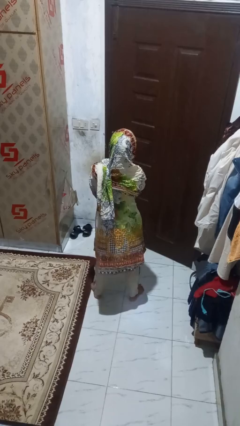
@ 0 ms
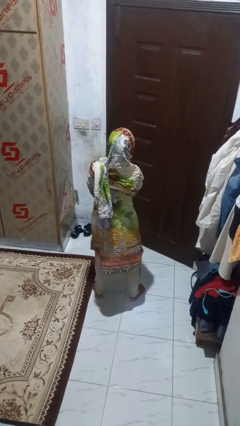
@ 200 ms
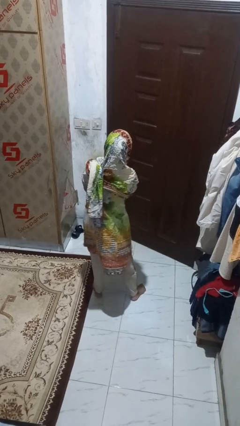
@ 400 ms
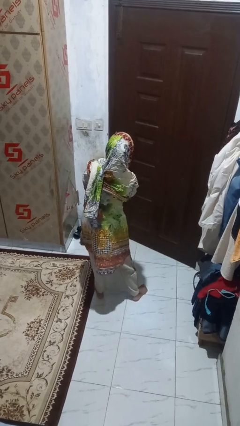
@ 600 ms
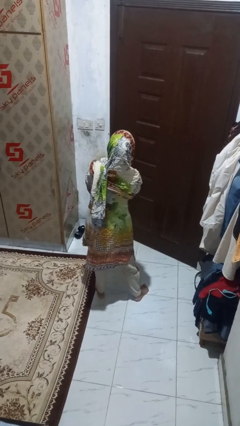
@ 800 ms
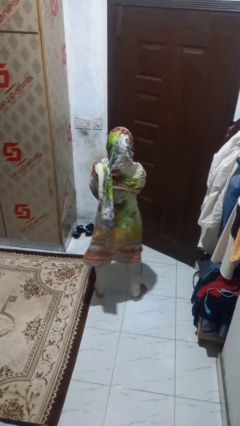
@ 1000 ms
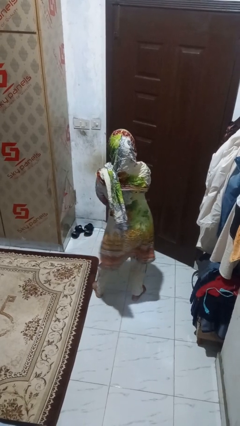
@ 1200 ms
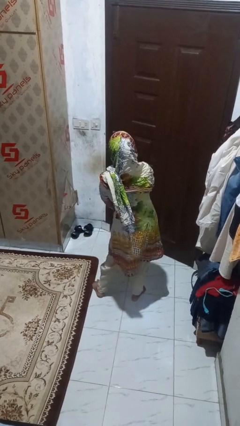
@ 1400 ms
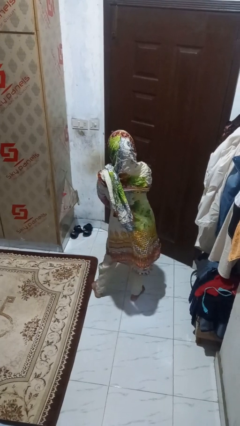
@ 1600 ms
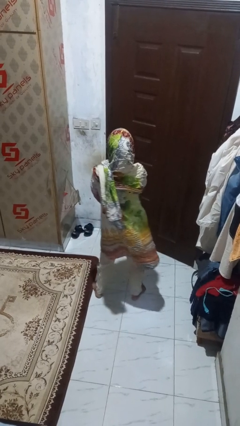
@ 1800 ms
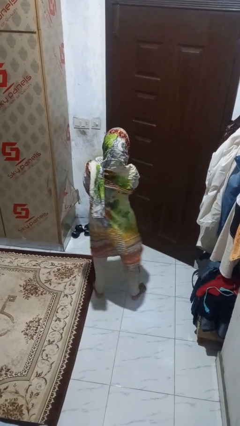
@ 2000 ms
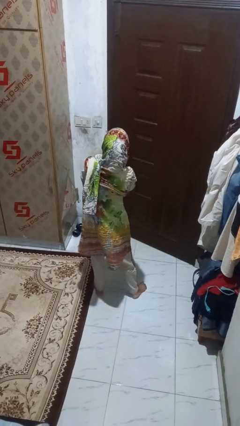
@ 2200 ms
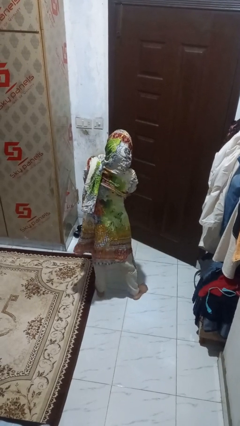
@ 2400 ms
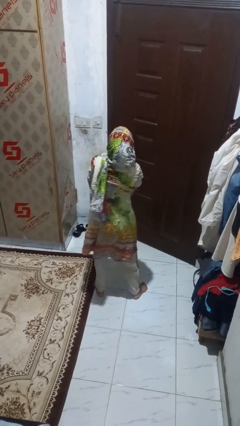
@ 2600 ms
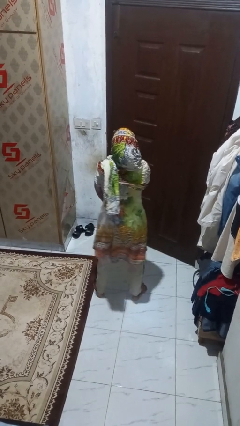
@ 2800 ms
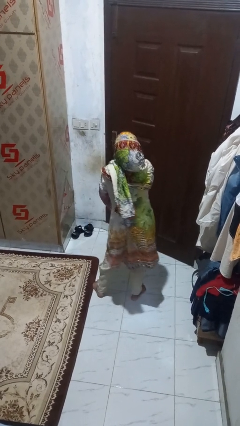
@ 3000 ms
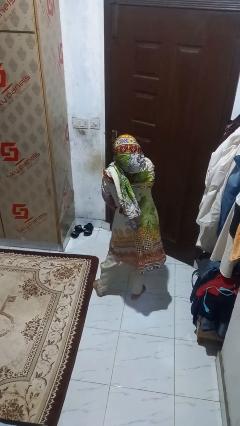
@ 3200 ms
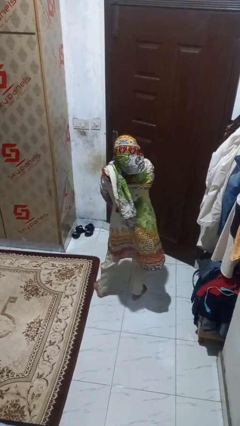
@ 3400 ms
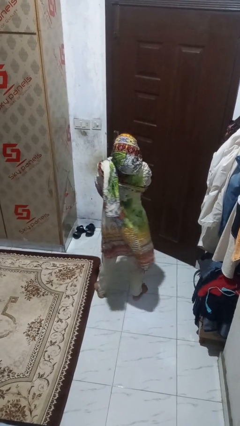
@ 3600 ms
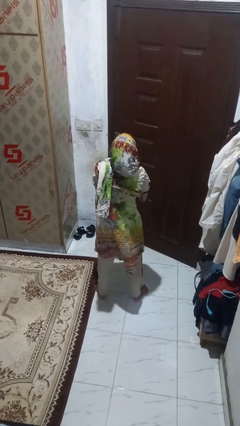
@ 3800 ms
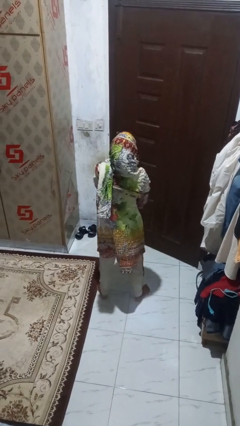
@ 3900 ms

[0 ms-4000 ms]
person wiggles hips

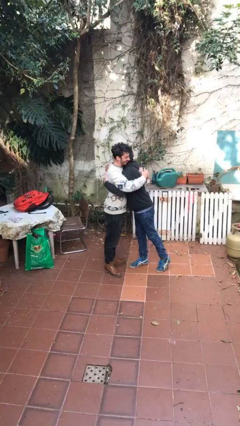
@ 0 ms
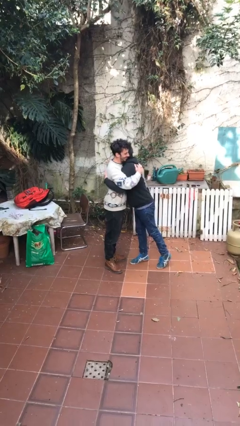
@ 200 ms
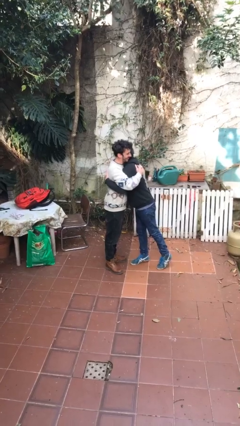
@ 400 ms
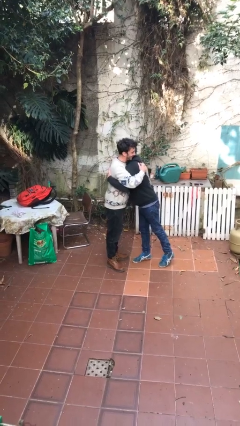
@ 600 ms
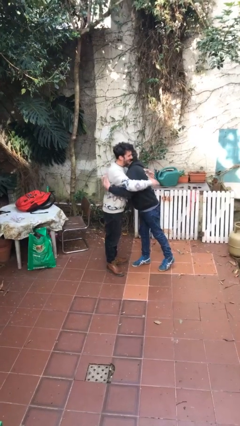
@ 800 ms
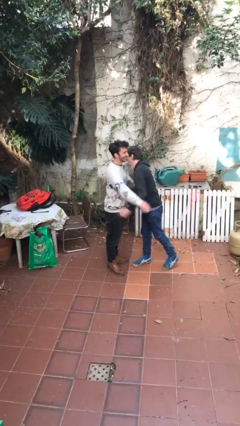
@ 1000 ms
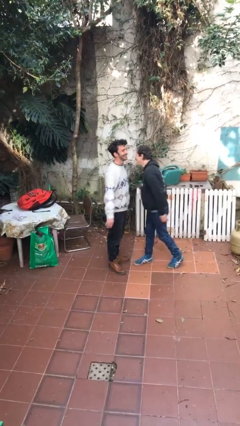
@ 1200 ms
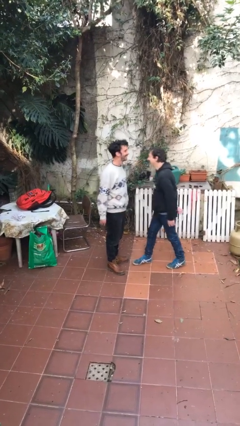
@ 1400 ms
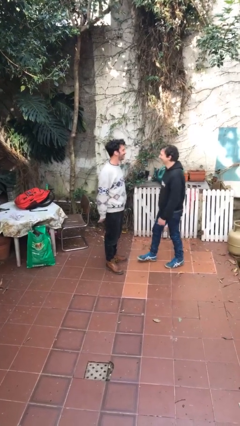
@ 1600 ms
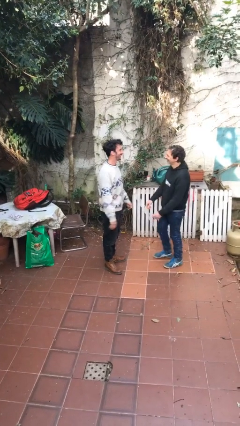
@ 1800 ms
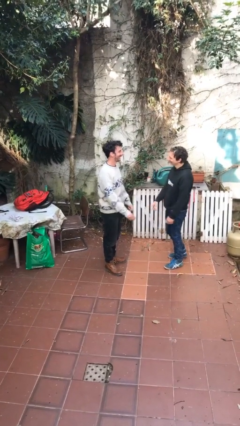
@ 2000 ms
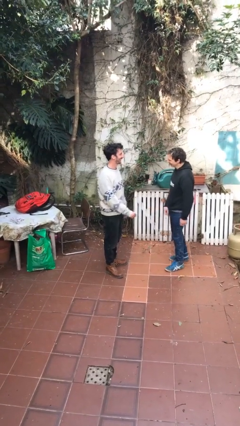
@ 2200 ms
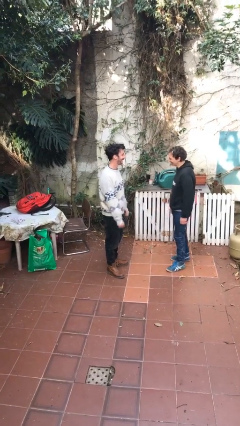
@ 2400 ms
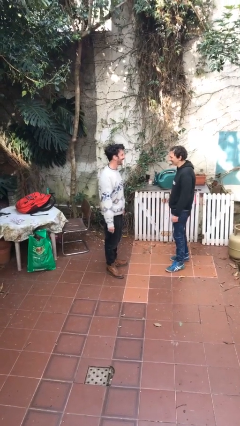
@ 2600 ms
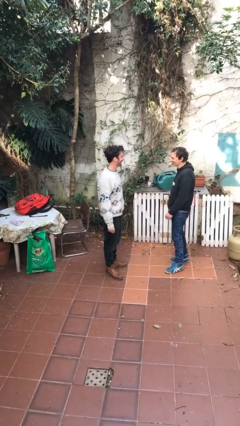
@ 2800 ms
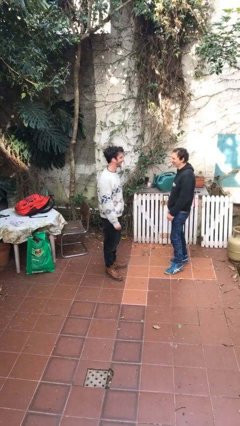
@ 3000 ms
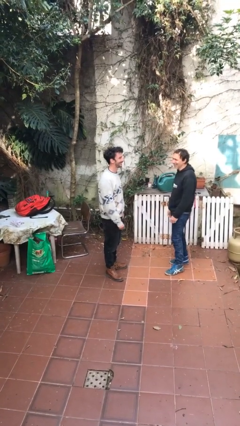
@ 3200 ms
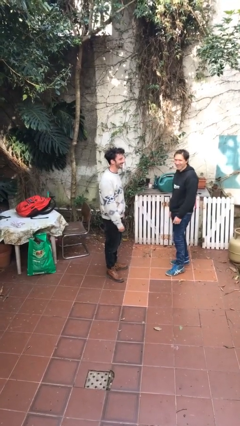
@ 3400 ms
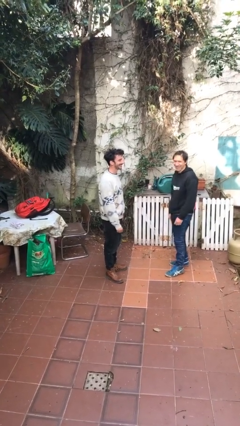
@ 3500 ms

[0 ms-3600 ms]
person talks to person

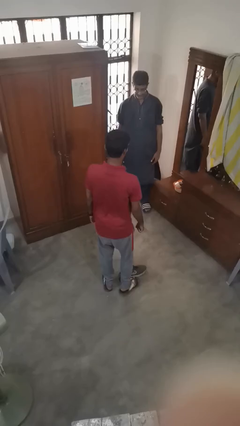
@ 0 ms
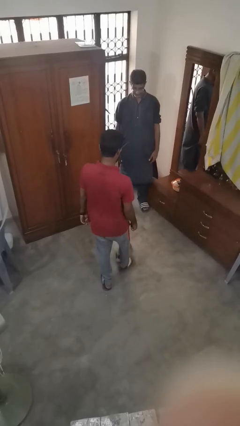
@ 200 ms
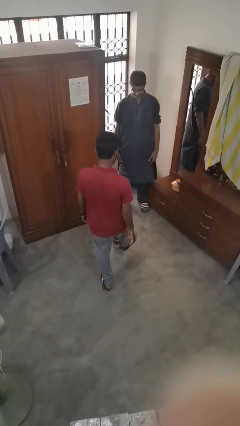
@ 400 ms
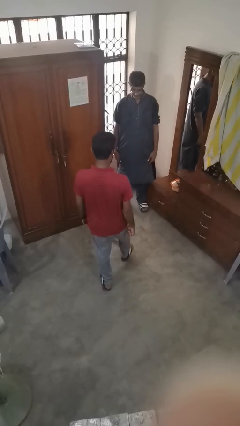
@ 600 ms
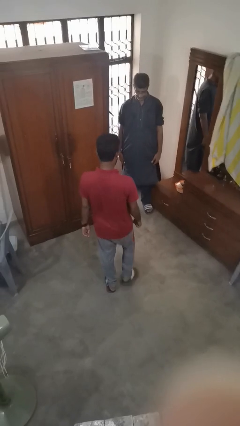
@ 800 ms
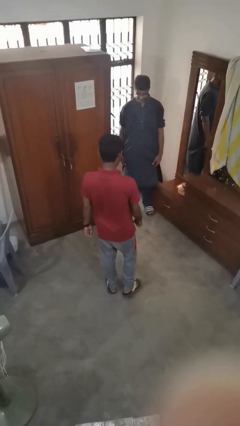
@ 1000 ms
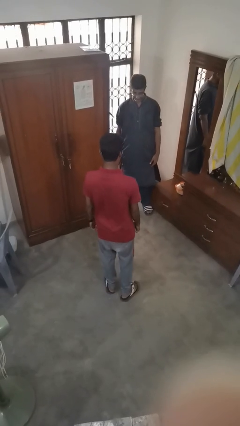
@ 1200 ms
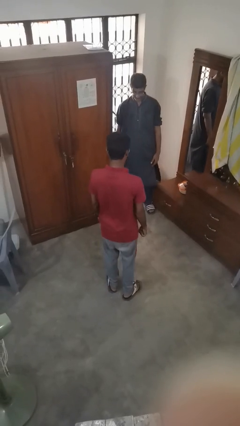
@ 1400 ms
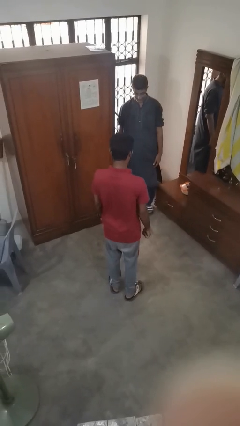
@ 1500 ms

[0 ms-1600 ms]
person kicks object to person

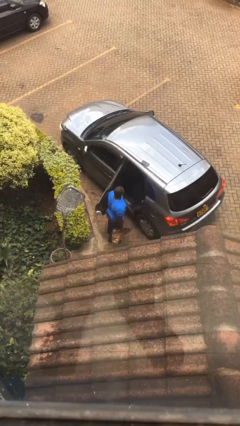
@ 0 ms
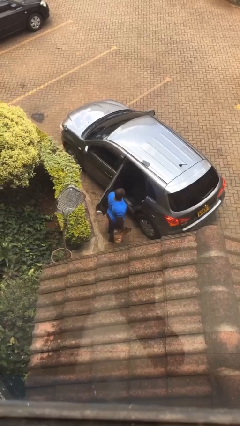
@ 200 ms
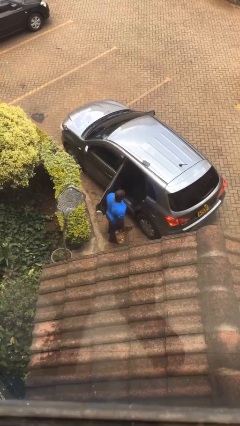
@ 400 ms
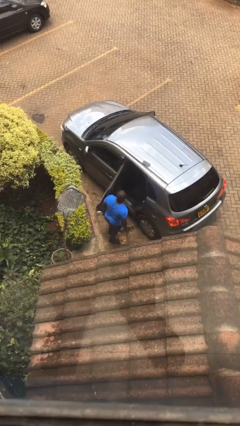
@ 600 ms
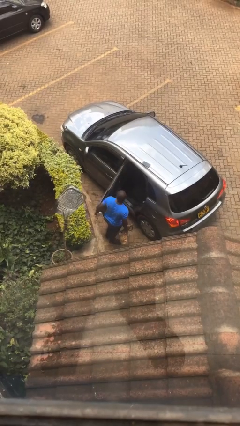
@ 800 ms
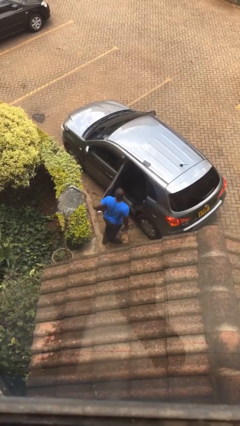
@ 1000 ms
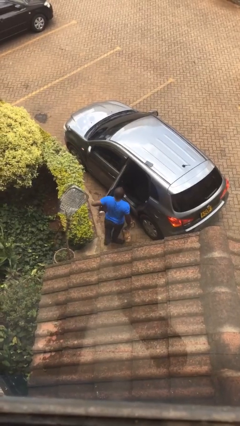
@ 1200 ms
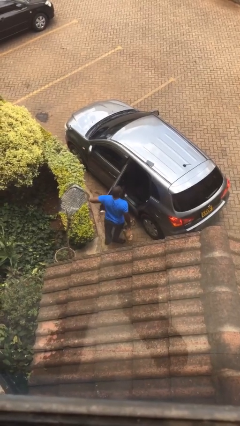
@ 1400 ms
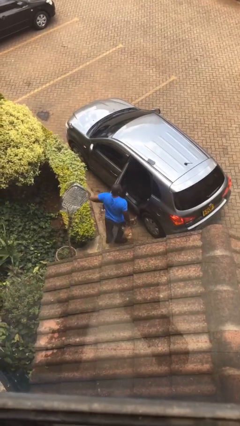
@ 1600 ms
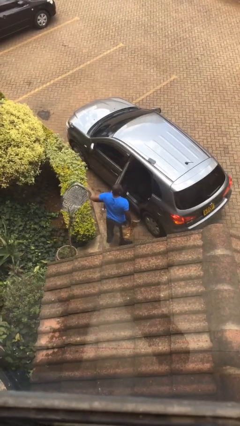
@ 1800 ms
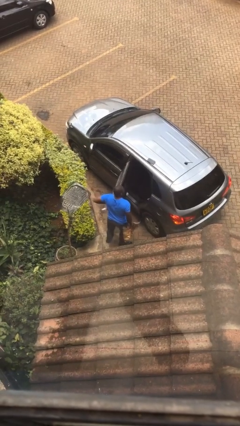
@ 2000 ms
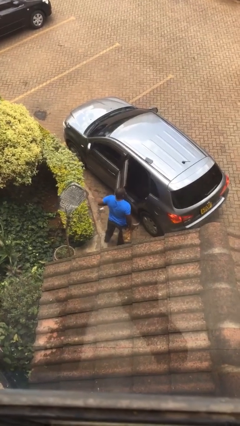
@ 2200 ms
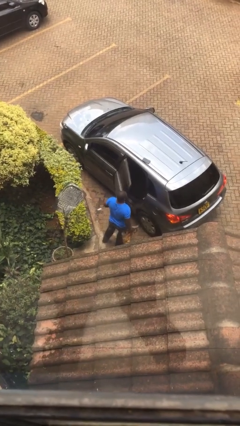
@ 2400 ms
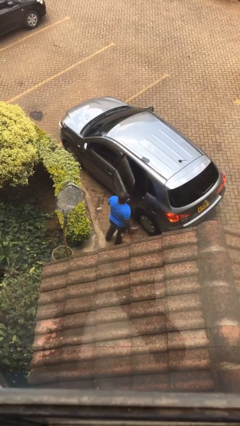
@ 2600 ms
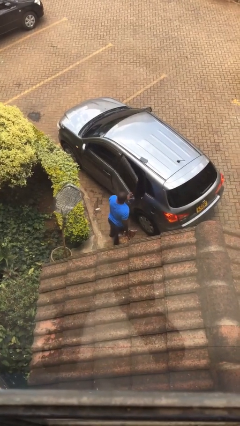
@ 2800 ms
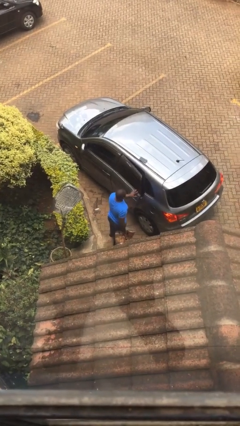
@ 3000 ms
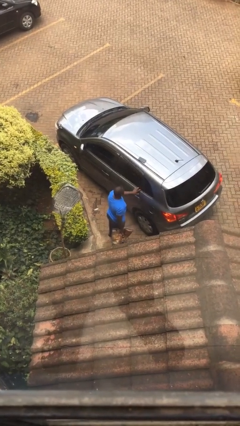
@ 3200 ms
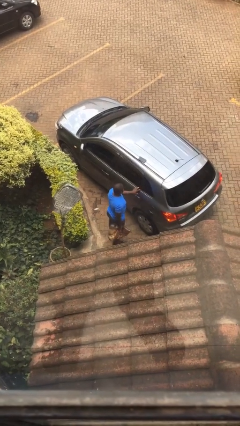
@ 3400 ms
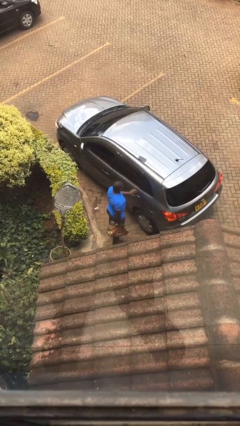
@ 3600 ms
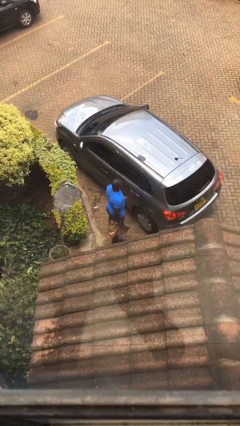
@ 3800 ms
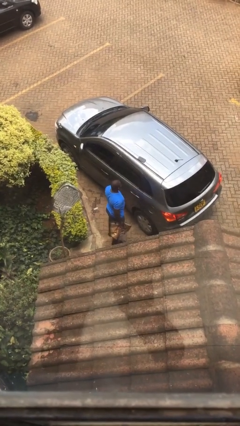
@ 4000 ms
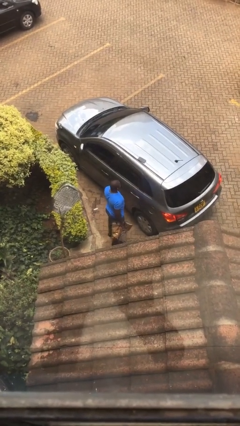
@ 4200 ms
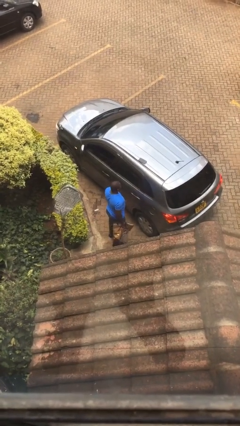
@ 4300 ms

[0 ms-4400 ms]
person closes car door

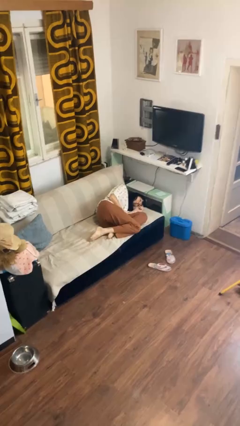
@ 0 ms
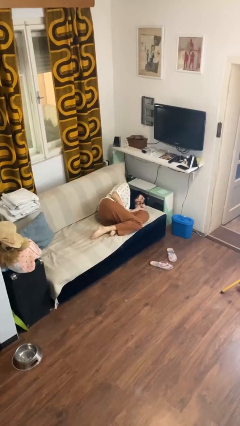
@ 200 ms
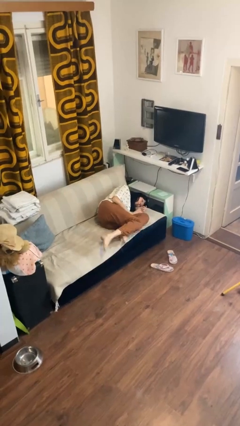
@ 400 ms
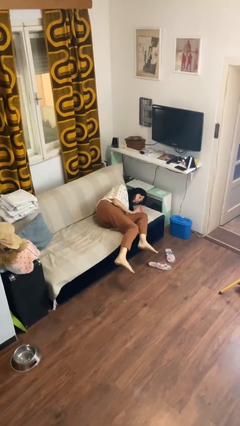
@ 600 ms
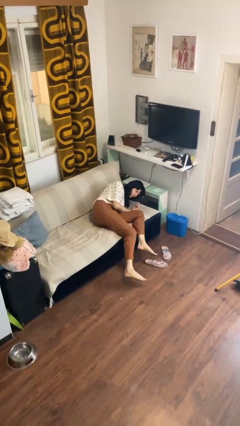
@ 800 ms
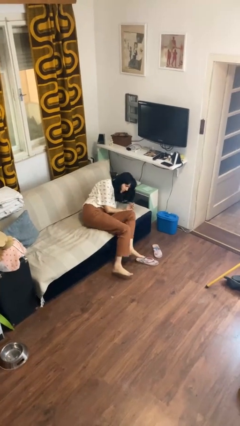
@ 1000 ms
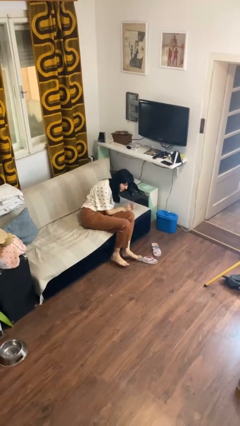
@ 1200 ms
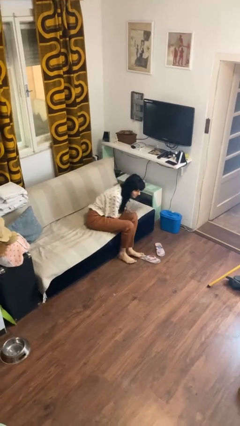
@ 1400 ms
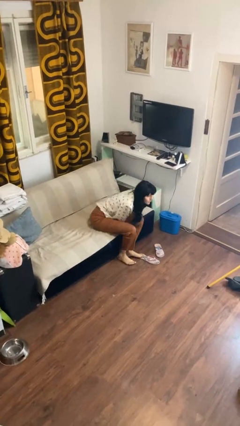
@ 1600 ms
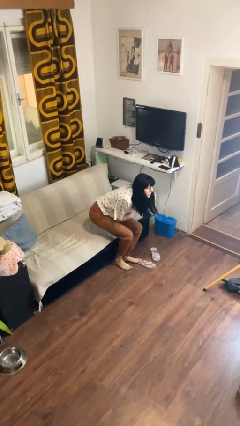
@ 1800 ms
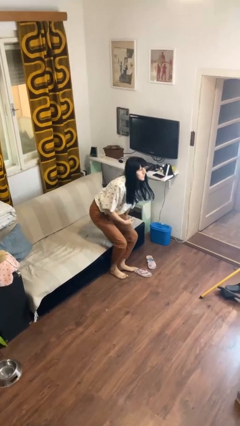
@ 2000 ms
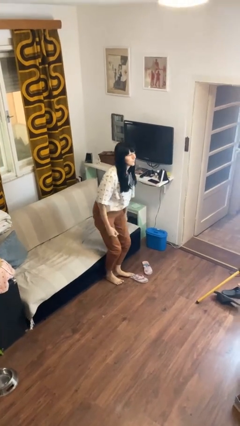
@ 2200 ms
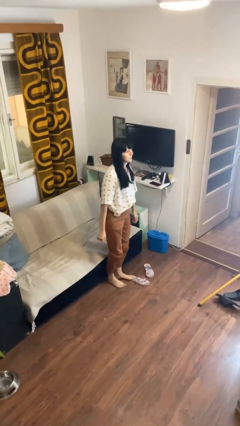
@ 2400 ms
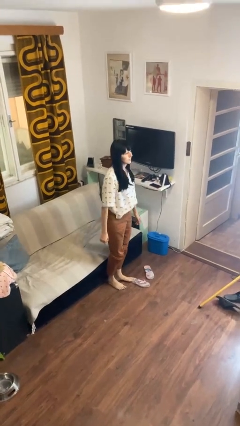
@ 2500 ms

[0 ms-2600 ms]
person stands up

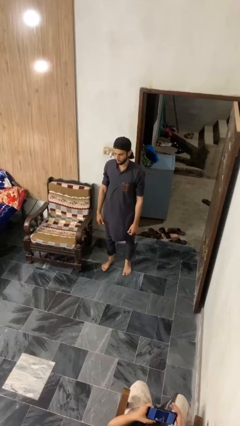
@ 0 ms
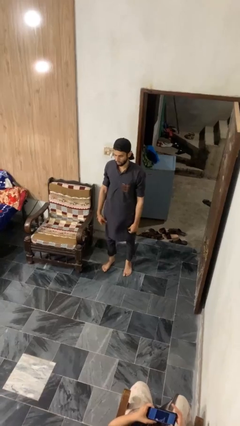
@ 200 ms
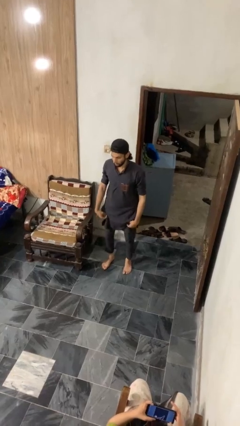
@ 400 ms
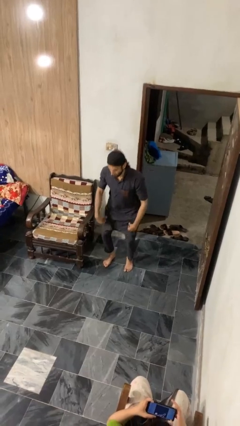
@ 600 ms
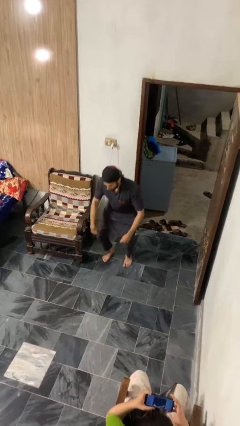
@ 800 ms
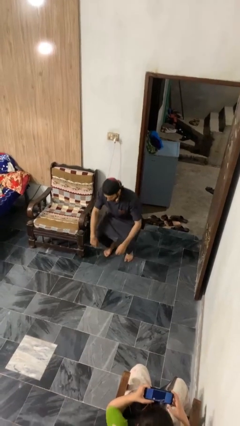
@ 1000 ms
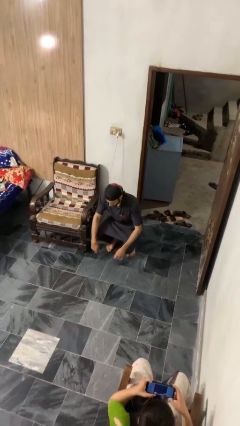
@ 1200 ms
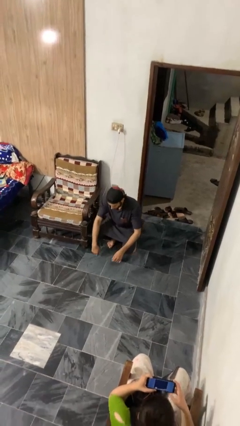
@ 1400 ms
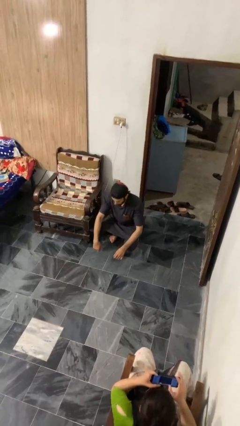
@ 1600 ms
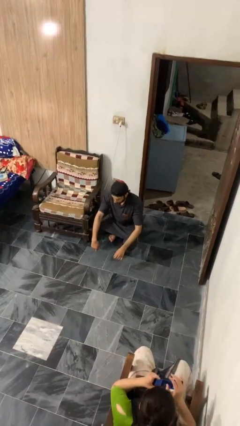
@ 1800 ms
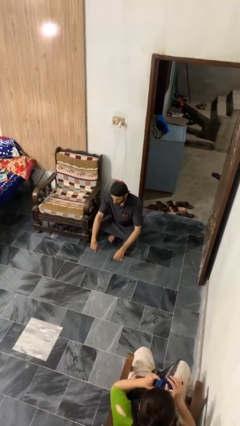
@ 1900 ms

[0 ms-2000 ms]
person squats
